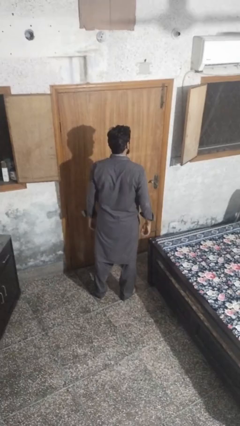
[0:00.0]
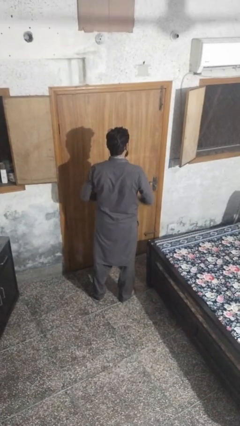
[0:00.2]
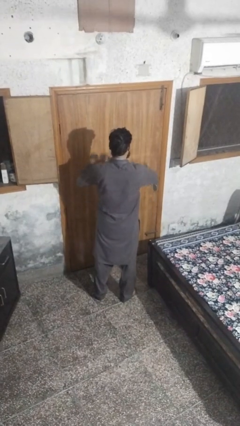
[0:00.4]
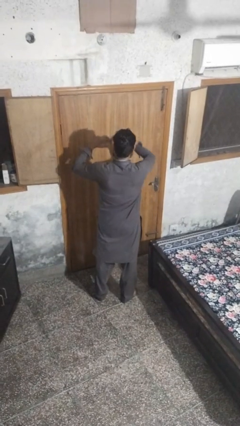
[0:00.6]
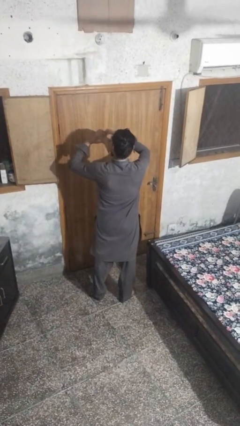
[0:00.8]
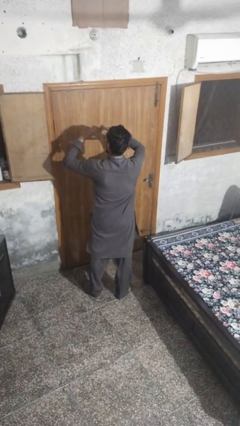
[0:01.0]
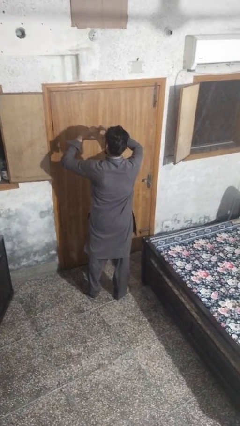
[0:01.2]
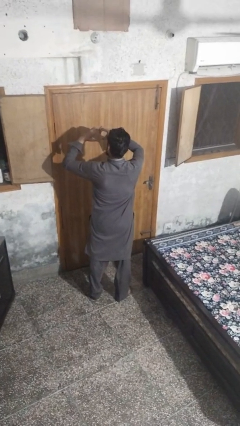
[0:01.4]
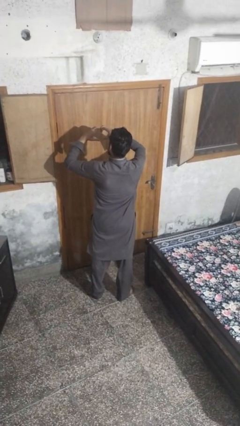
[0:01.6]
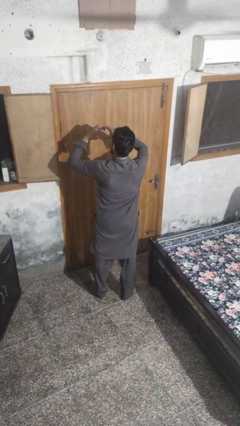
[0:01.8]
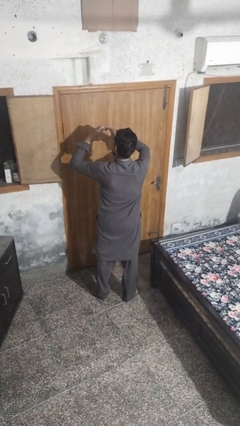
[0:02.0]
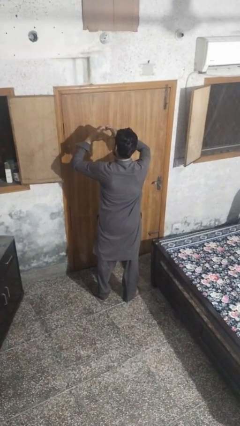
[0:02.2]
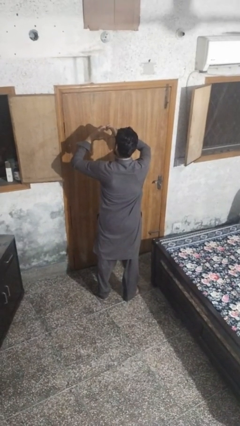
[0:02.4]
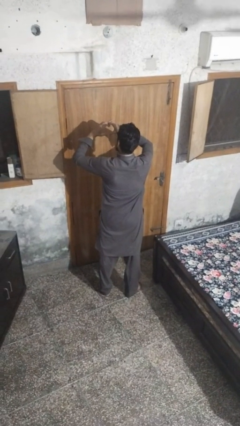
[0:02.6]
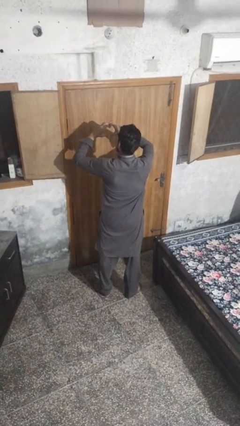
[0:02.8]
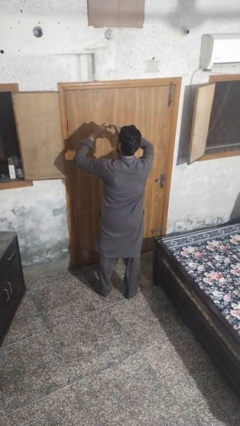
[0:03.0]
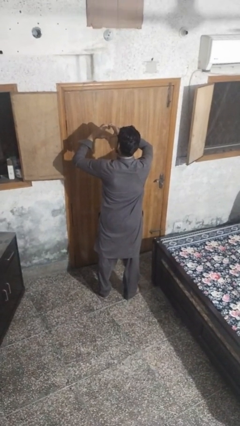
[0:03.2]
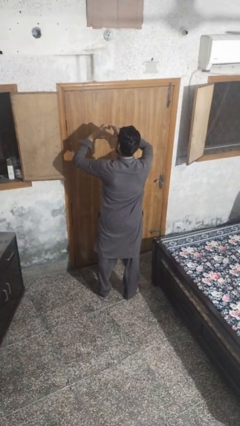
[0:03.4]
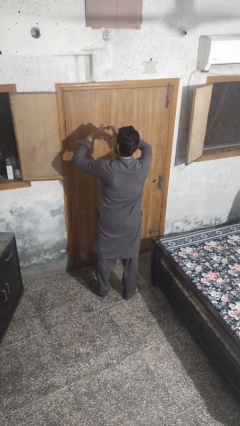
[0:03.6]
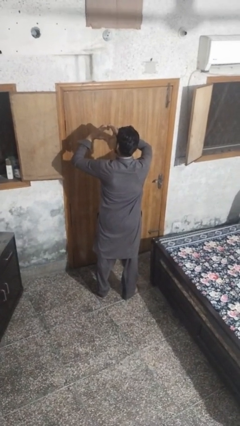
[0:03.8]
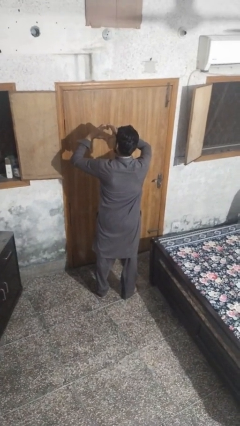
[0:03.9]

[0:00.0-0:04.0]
person gestures heart

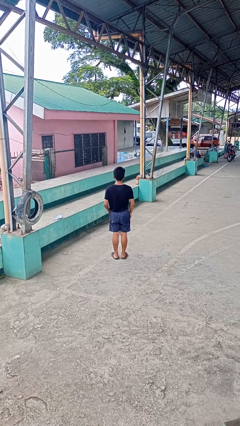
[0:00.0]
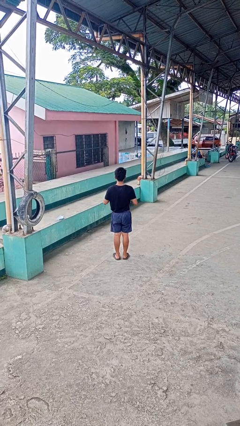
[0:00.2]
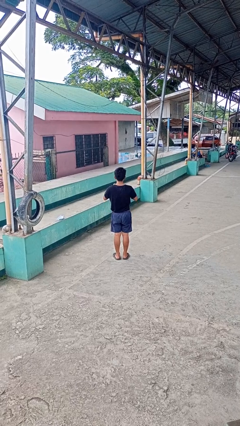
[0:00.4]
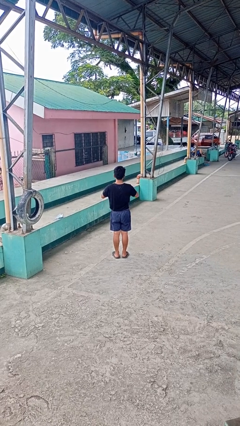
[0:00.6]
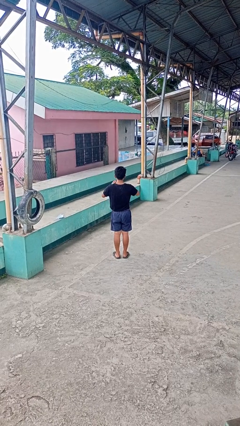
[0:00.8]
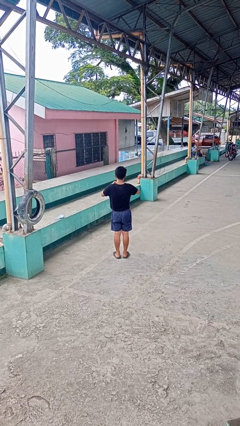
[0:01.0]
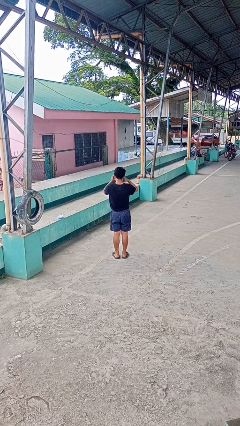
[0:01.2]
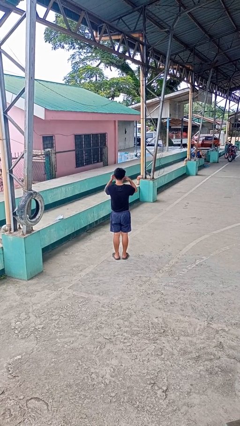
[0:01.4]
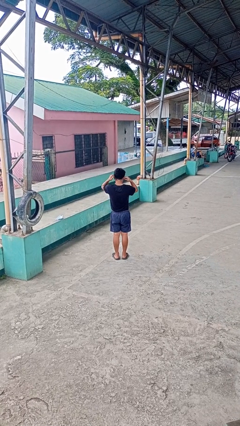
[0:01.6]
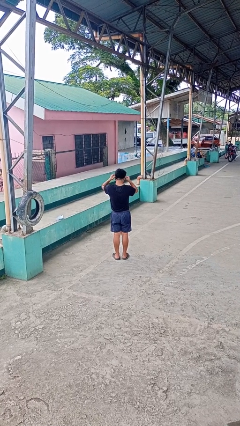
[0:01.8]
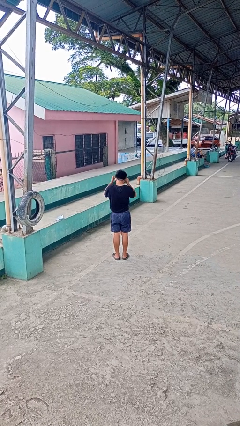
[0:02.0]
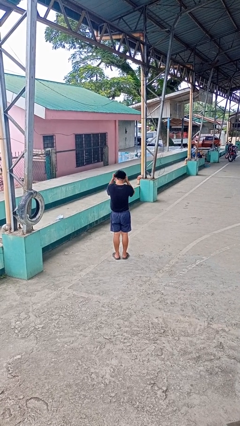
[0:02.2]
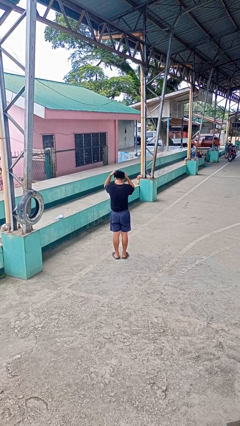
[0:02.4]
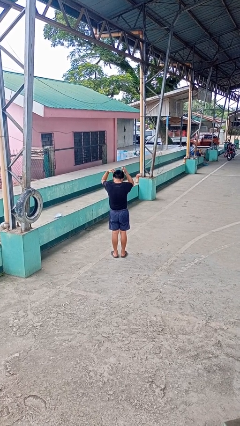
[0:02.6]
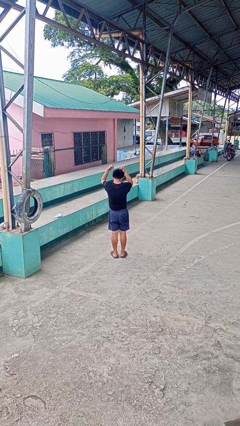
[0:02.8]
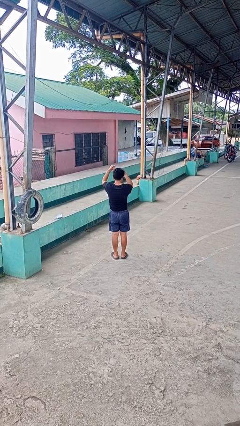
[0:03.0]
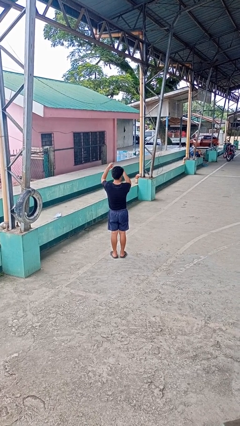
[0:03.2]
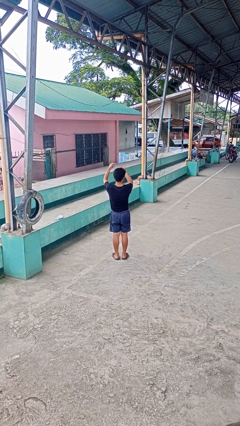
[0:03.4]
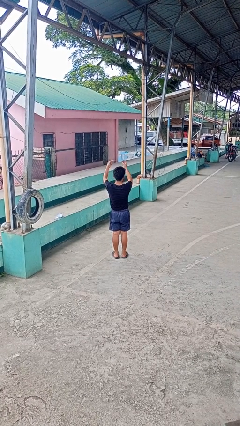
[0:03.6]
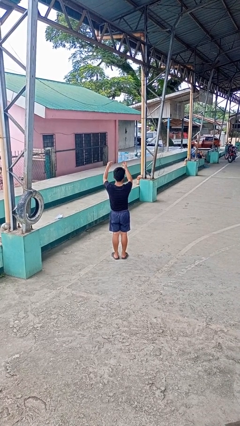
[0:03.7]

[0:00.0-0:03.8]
person takes off necklace

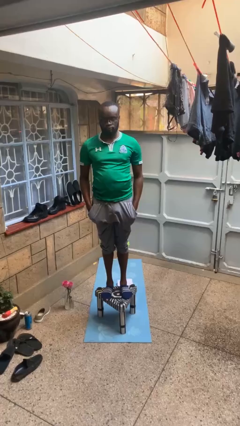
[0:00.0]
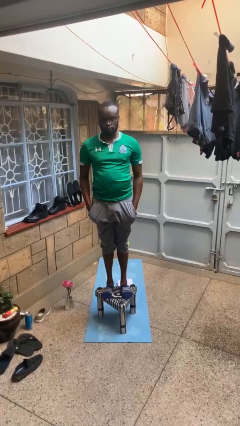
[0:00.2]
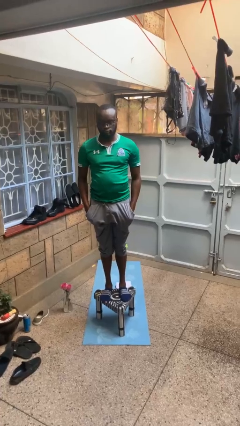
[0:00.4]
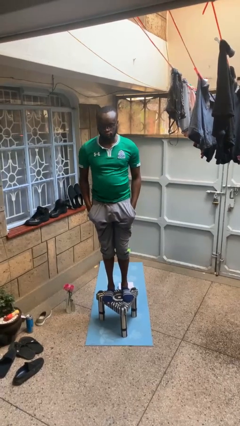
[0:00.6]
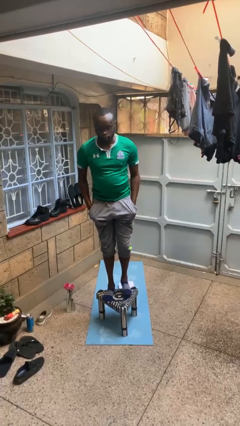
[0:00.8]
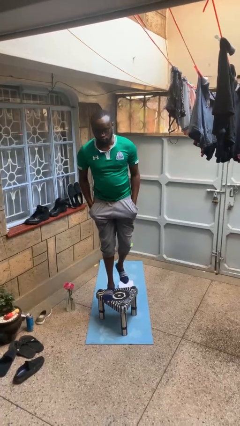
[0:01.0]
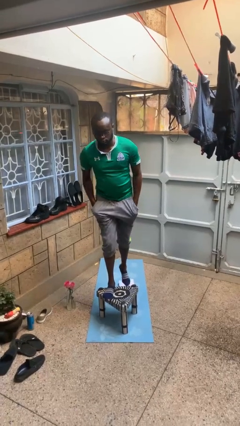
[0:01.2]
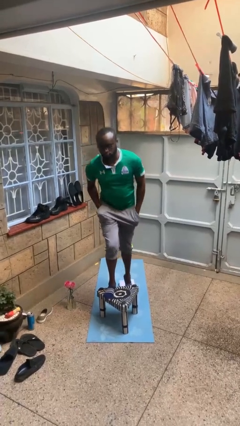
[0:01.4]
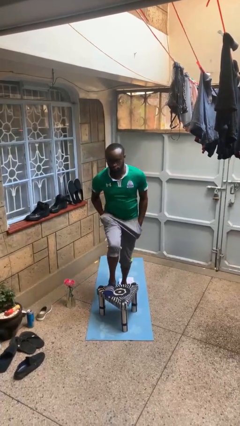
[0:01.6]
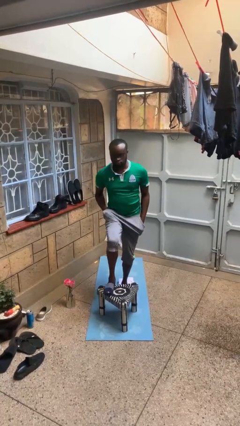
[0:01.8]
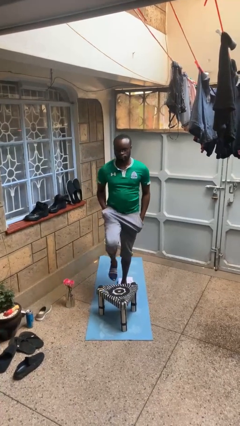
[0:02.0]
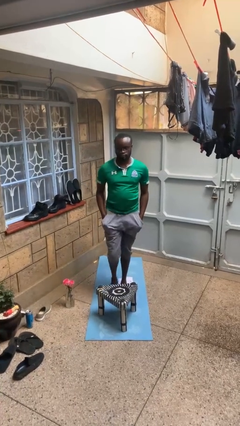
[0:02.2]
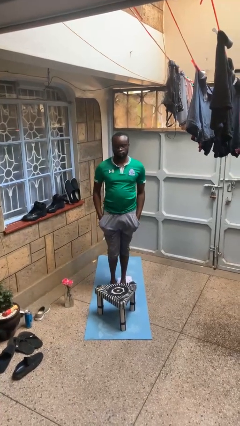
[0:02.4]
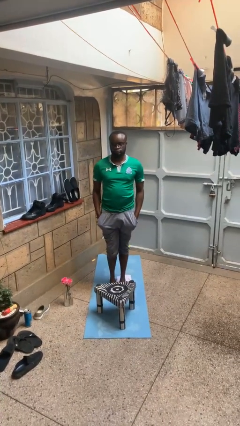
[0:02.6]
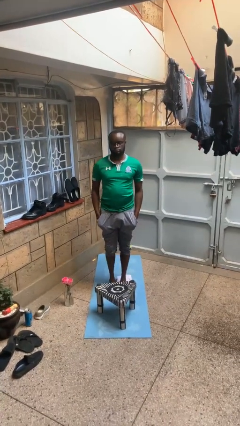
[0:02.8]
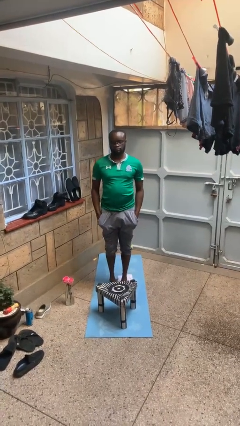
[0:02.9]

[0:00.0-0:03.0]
person climbs off table

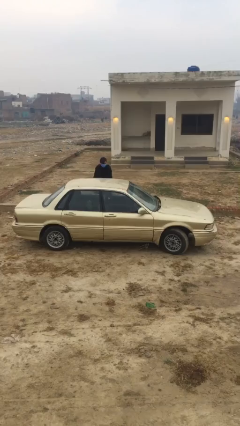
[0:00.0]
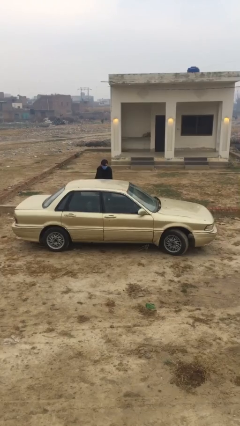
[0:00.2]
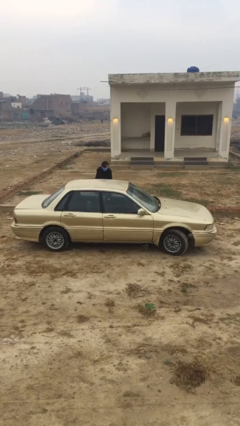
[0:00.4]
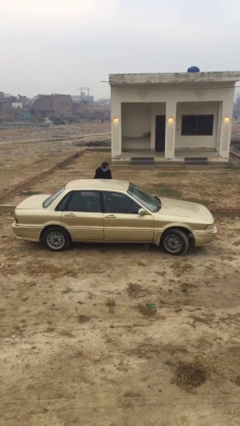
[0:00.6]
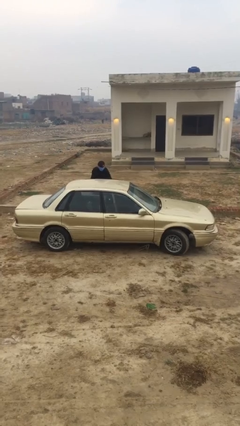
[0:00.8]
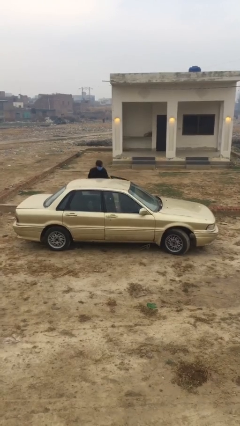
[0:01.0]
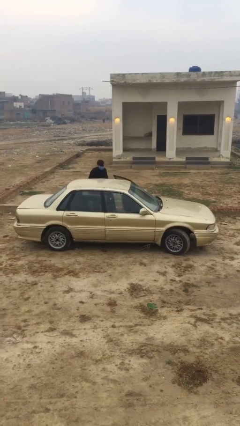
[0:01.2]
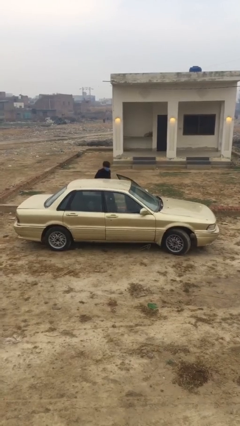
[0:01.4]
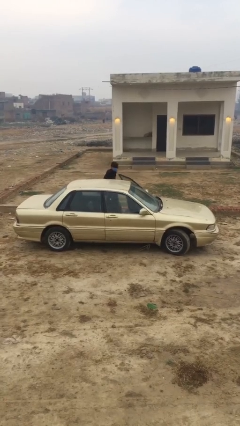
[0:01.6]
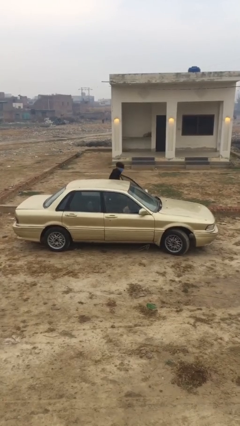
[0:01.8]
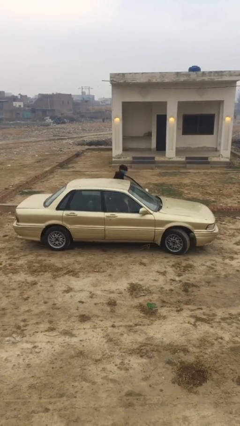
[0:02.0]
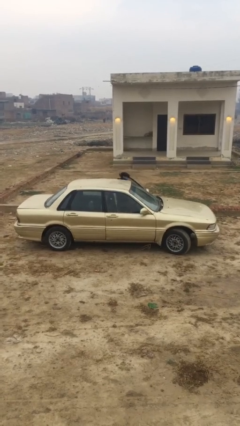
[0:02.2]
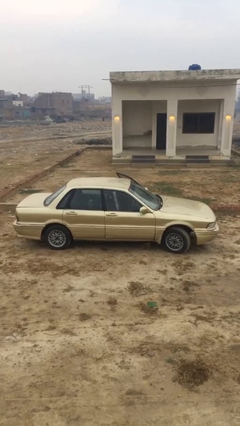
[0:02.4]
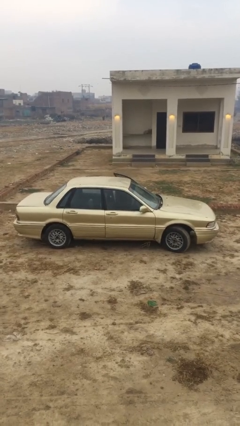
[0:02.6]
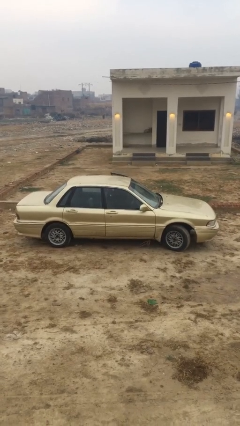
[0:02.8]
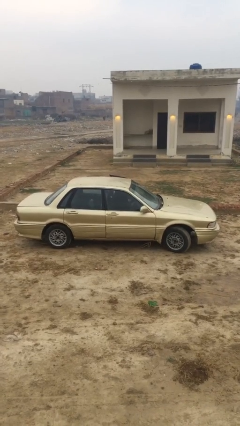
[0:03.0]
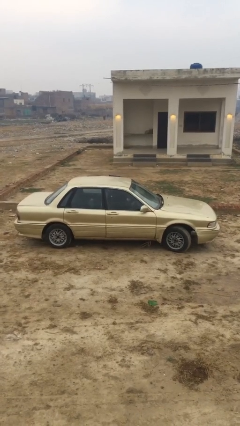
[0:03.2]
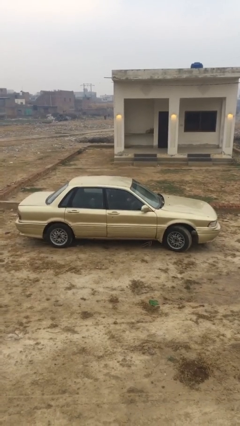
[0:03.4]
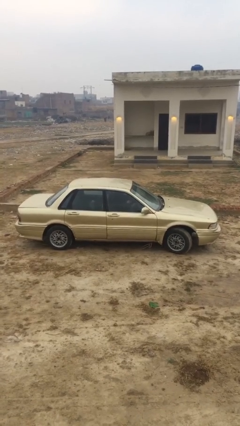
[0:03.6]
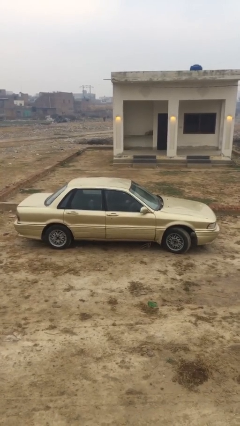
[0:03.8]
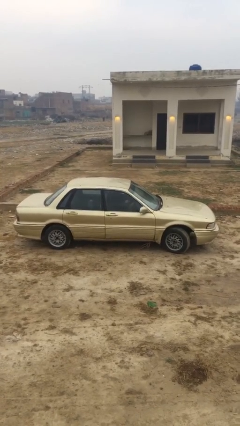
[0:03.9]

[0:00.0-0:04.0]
car picks up person

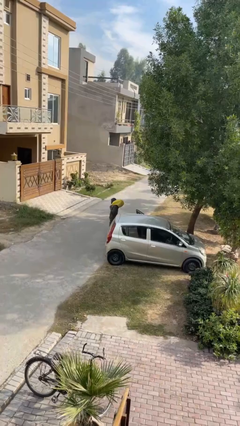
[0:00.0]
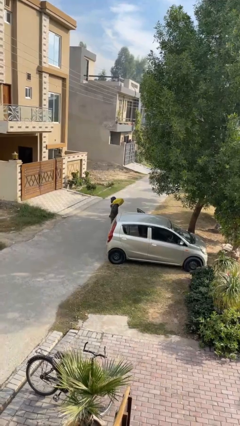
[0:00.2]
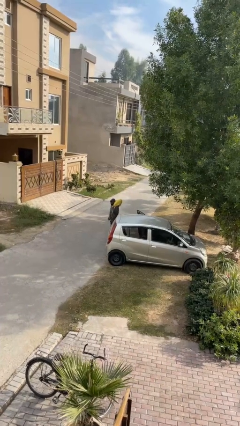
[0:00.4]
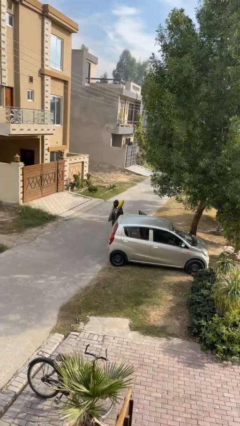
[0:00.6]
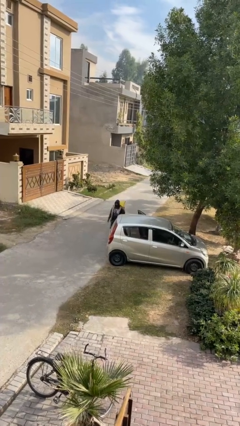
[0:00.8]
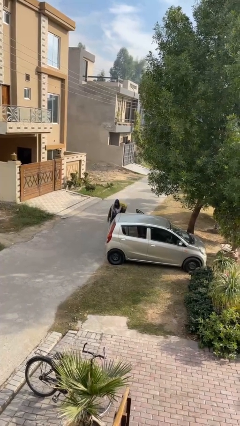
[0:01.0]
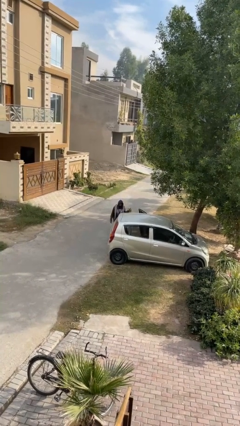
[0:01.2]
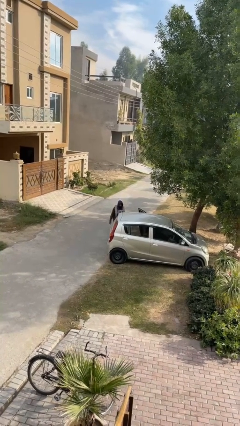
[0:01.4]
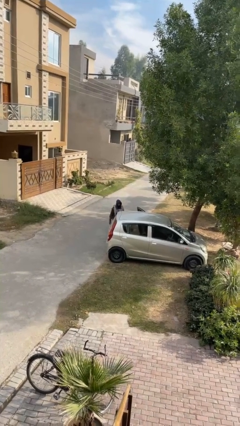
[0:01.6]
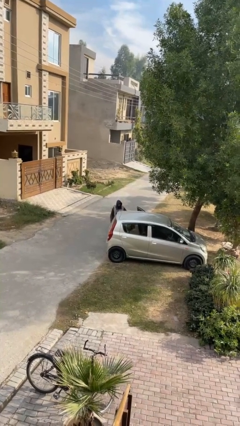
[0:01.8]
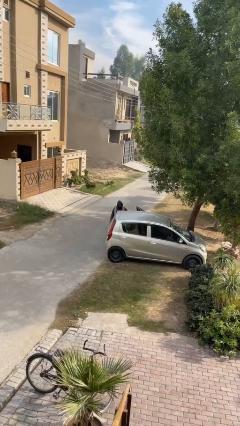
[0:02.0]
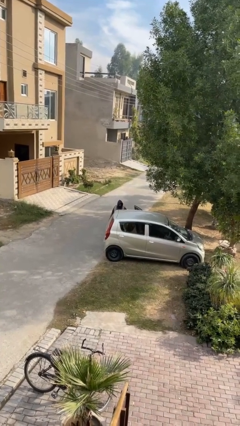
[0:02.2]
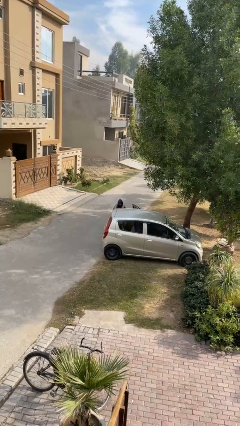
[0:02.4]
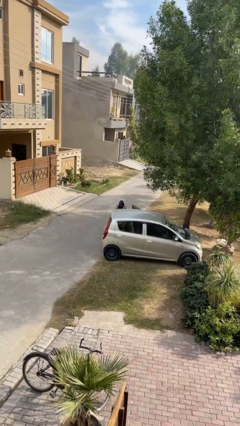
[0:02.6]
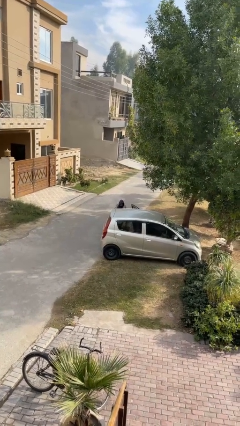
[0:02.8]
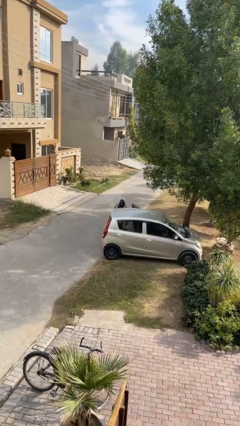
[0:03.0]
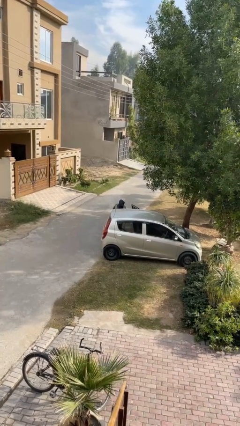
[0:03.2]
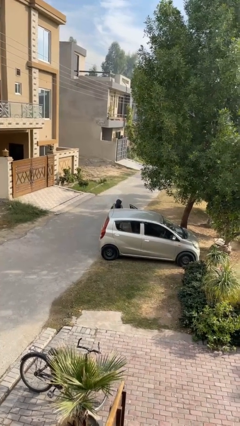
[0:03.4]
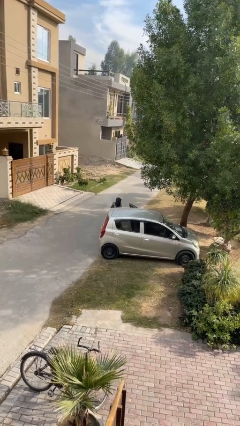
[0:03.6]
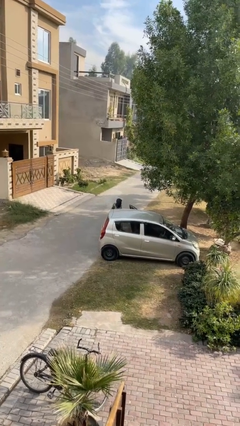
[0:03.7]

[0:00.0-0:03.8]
person loads car
